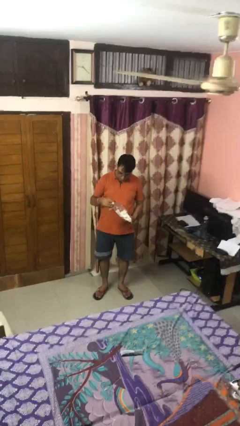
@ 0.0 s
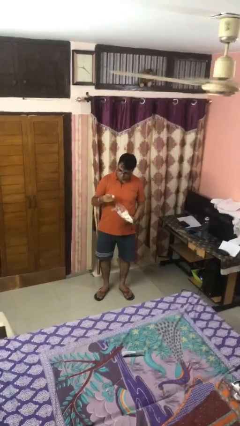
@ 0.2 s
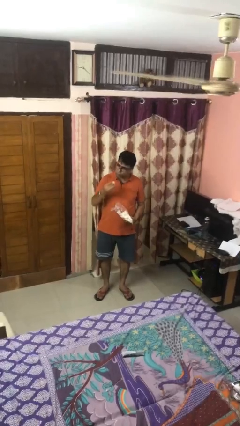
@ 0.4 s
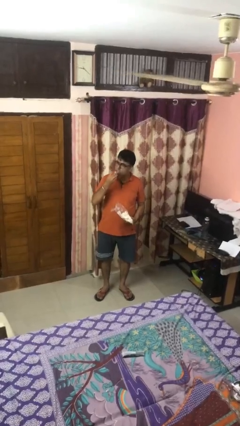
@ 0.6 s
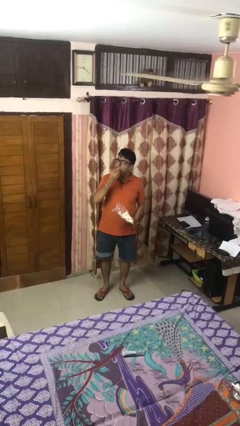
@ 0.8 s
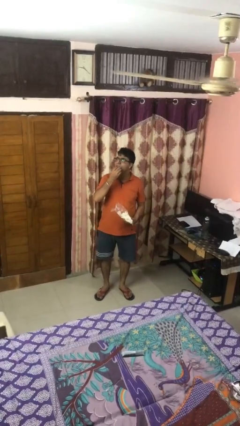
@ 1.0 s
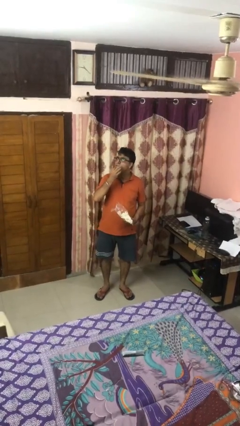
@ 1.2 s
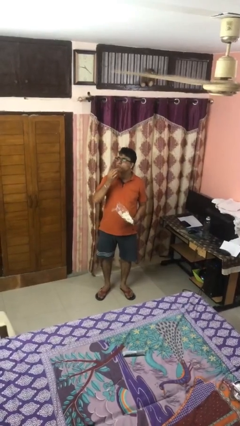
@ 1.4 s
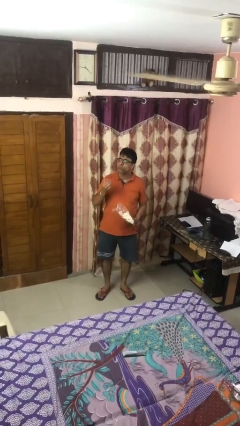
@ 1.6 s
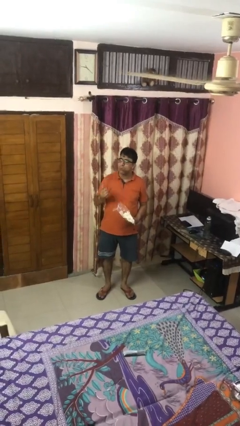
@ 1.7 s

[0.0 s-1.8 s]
person eats snack from bag

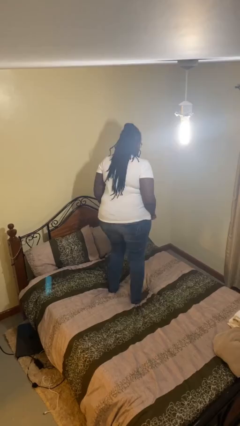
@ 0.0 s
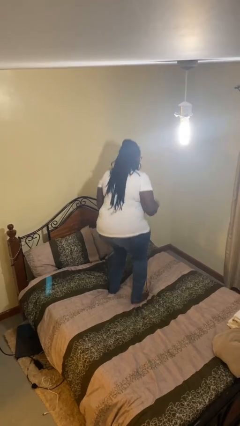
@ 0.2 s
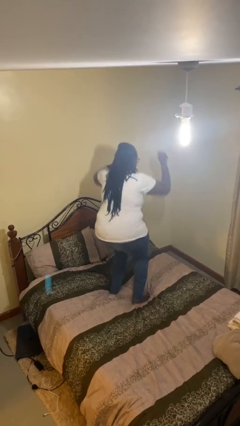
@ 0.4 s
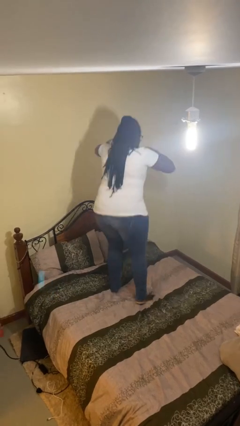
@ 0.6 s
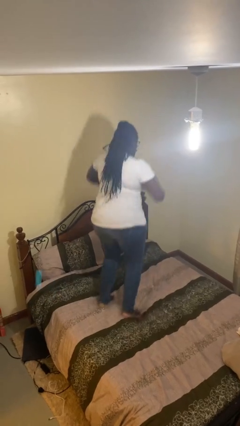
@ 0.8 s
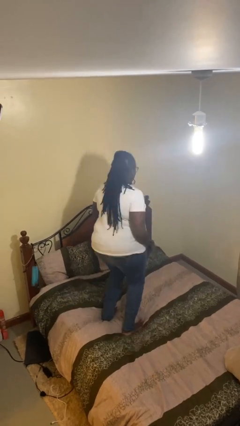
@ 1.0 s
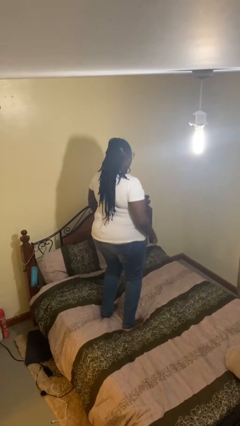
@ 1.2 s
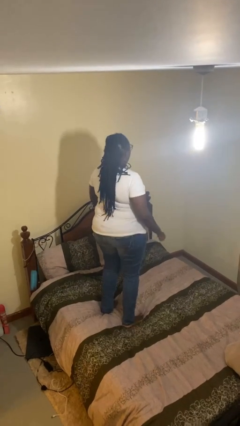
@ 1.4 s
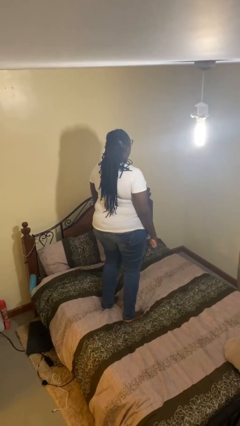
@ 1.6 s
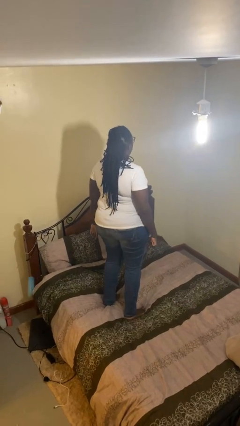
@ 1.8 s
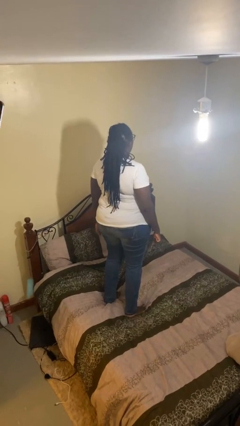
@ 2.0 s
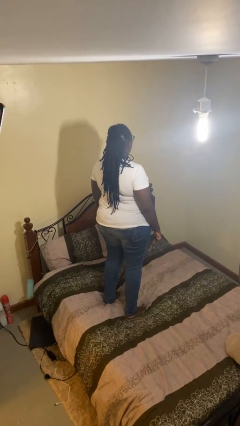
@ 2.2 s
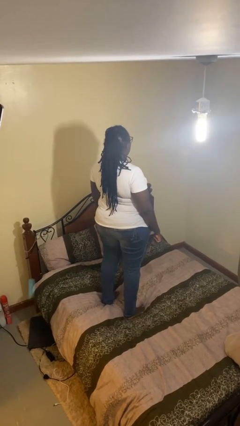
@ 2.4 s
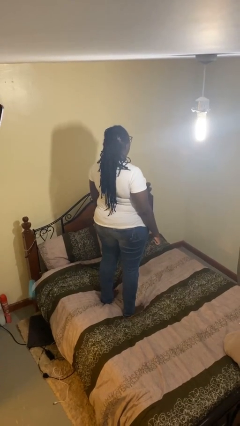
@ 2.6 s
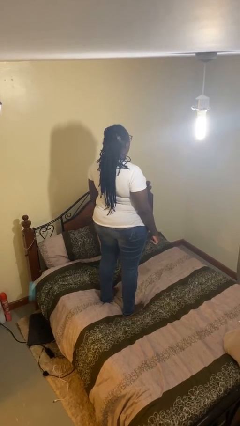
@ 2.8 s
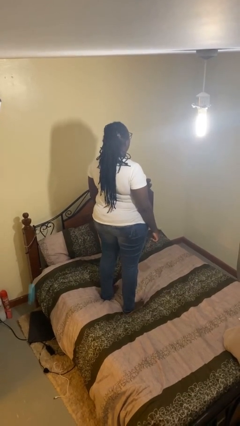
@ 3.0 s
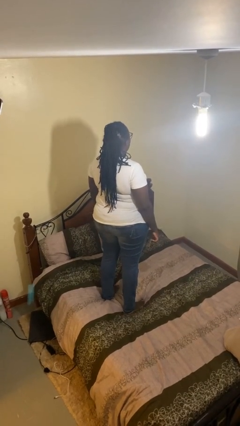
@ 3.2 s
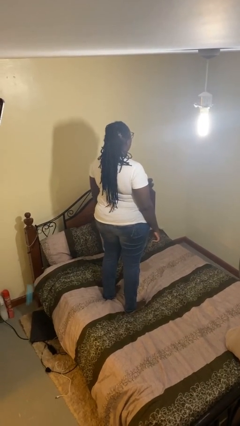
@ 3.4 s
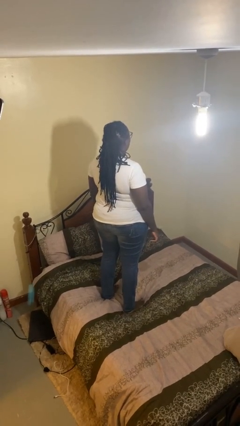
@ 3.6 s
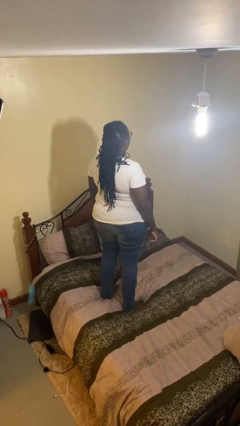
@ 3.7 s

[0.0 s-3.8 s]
person jumps on bed

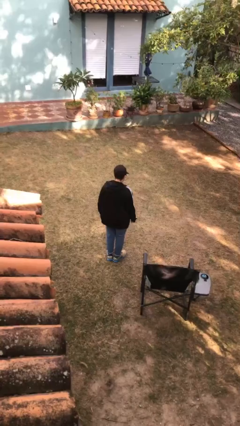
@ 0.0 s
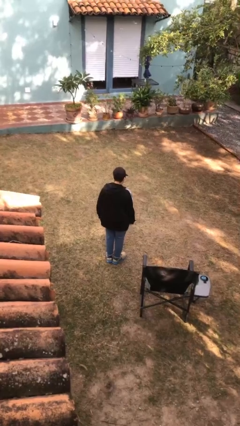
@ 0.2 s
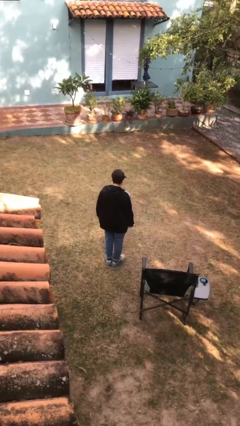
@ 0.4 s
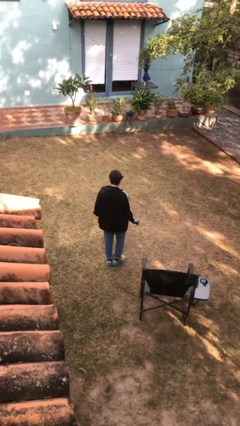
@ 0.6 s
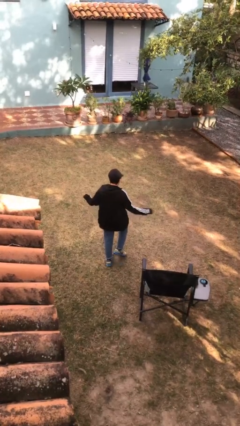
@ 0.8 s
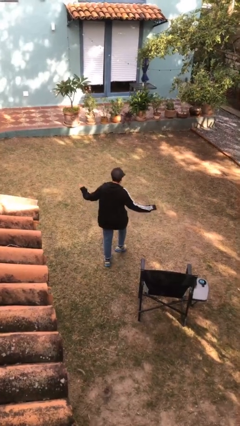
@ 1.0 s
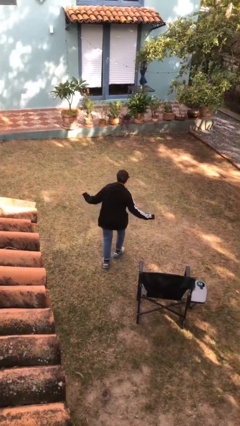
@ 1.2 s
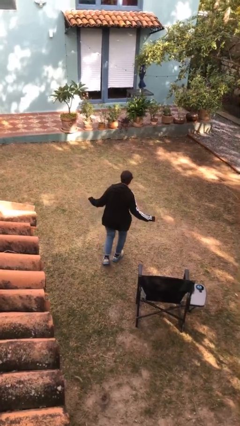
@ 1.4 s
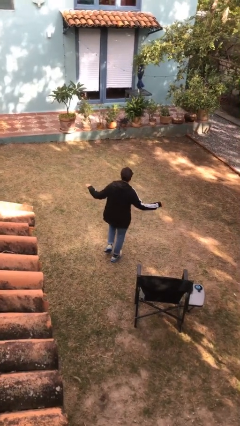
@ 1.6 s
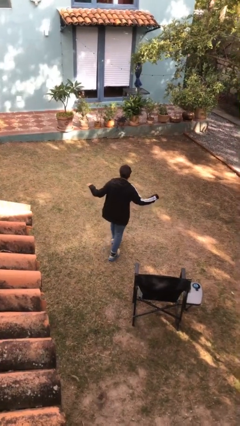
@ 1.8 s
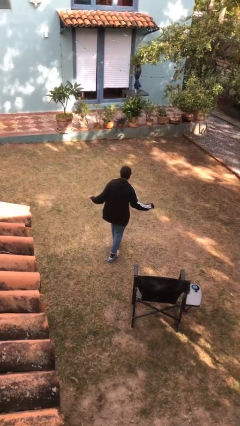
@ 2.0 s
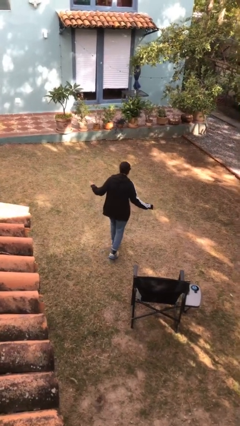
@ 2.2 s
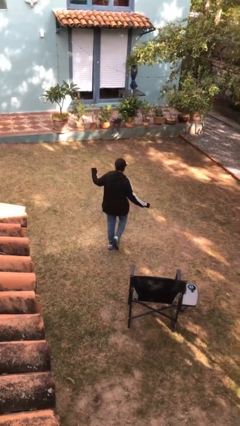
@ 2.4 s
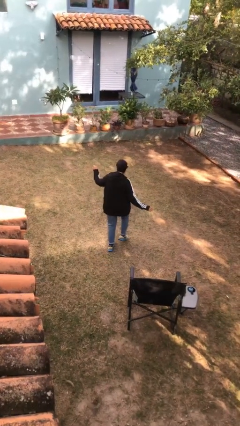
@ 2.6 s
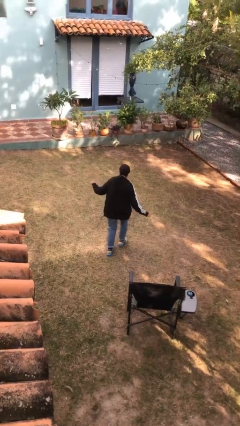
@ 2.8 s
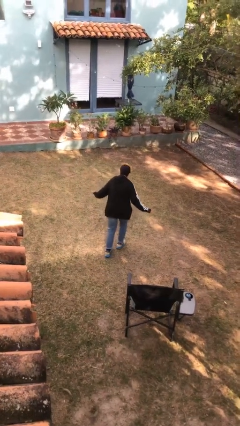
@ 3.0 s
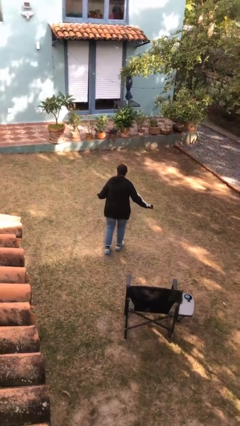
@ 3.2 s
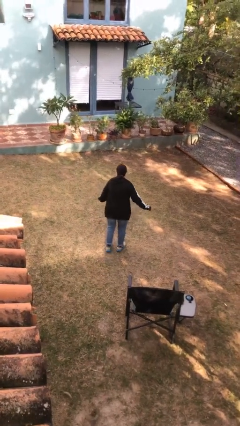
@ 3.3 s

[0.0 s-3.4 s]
person walks tiptoe

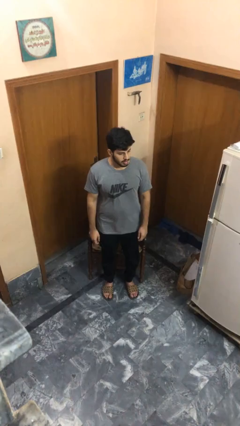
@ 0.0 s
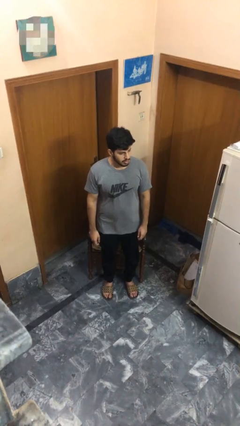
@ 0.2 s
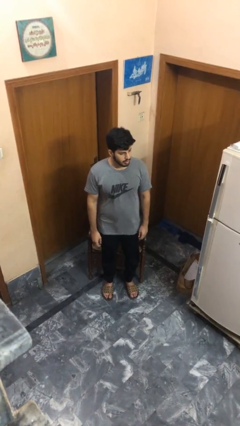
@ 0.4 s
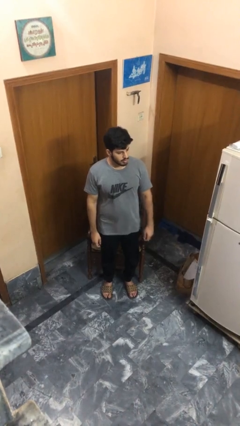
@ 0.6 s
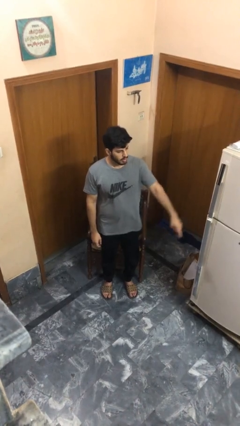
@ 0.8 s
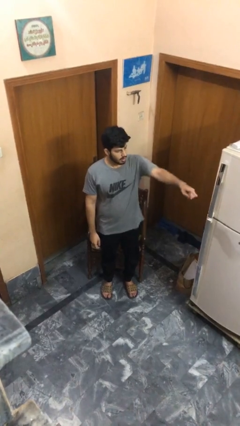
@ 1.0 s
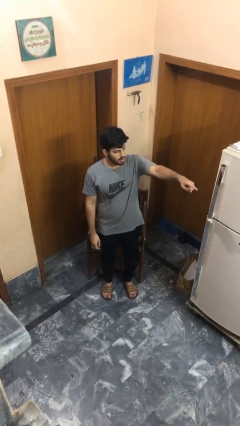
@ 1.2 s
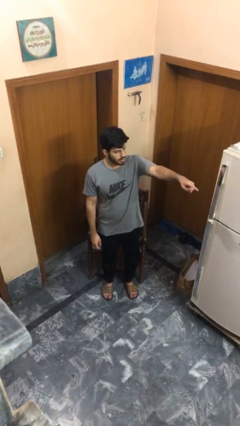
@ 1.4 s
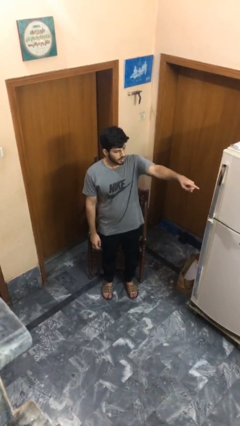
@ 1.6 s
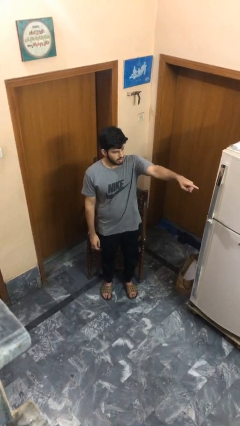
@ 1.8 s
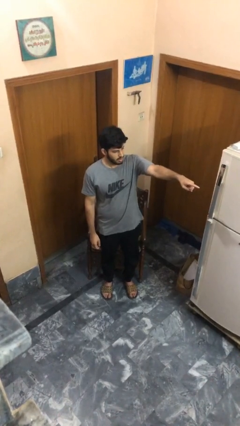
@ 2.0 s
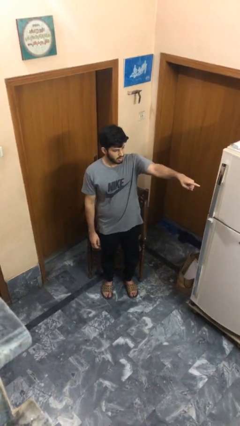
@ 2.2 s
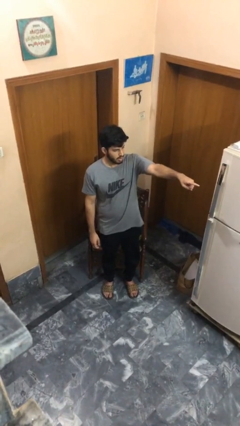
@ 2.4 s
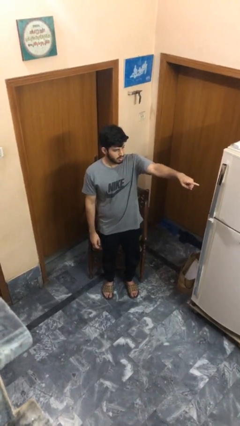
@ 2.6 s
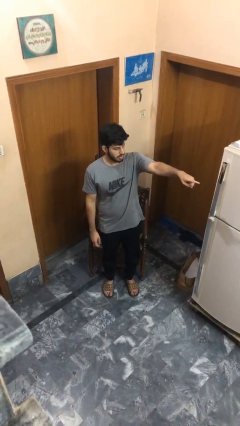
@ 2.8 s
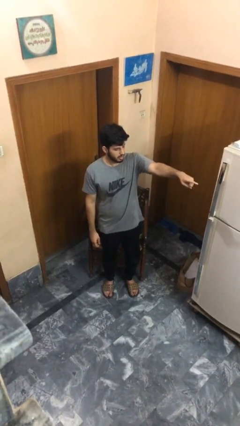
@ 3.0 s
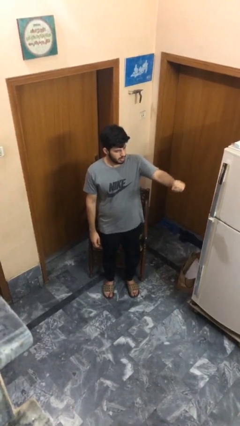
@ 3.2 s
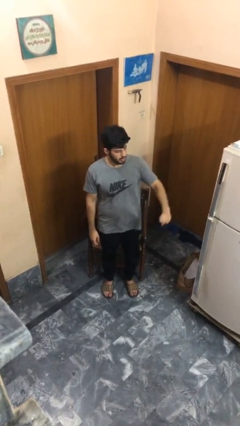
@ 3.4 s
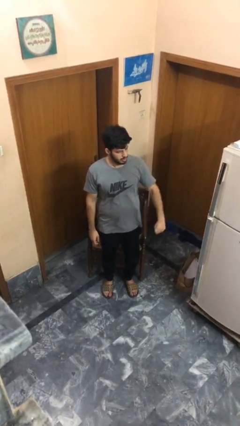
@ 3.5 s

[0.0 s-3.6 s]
person points at person

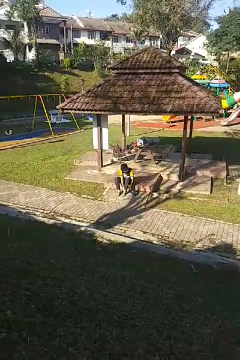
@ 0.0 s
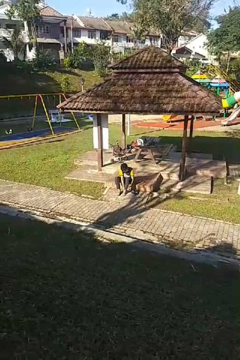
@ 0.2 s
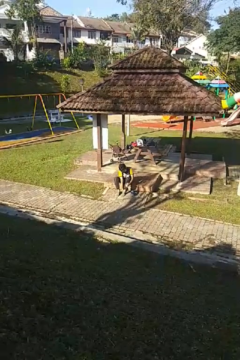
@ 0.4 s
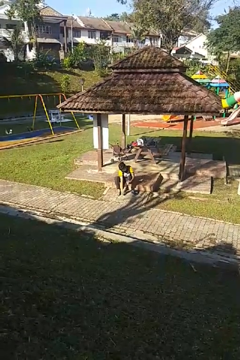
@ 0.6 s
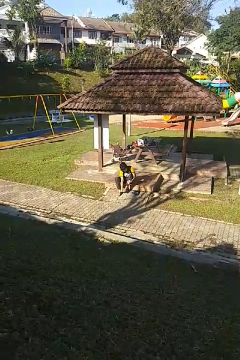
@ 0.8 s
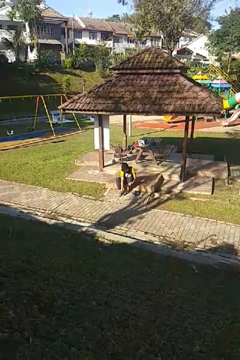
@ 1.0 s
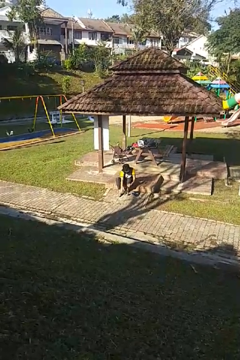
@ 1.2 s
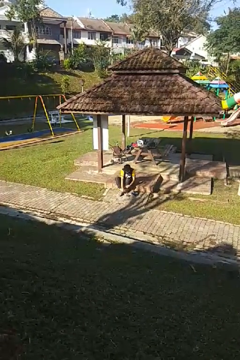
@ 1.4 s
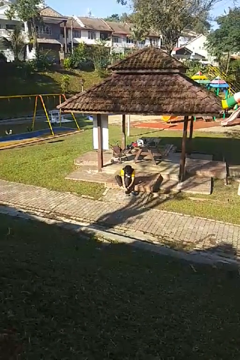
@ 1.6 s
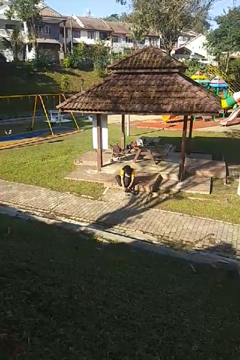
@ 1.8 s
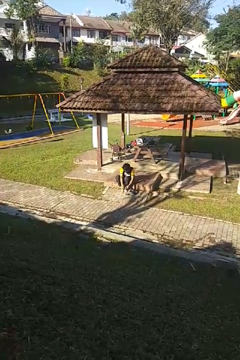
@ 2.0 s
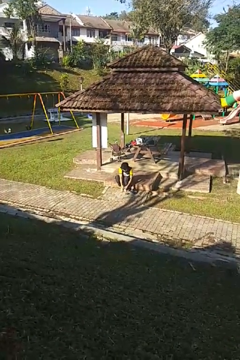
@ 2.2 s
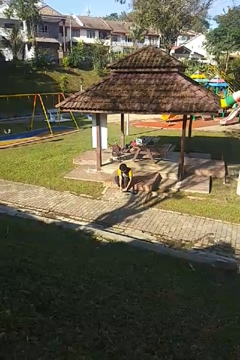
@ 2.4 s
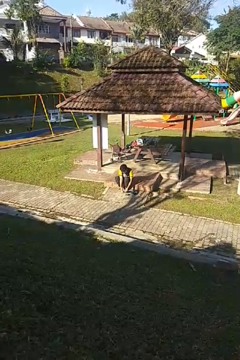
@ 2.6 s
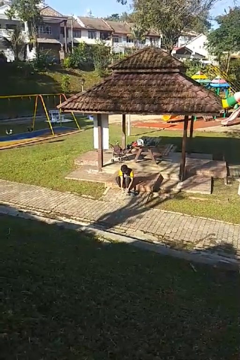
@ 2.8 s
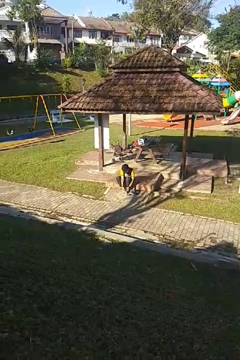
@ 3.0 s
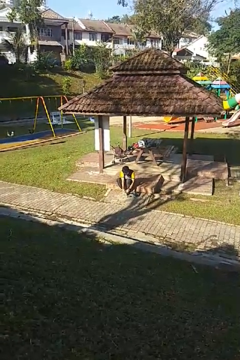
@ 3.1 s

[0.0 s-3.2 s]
person takes off socks

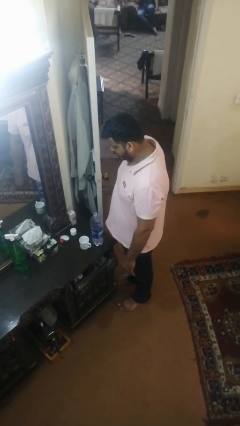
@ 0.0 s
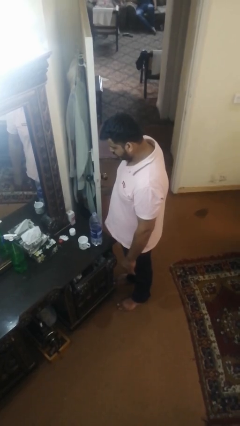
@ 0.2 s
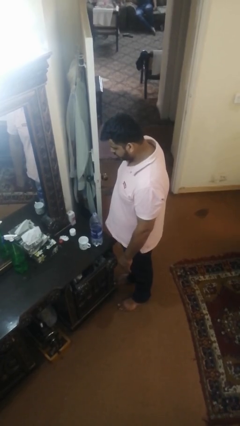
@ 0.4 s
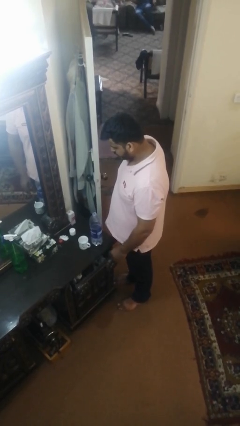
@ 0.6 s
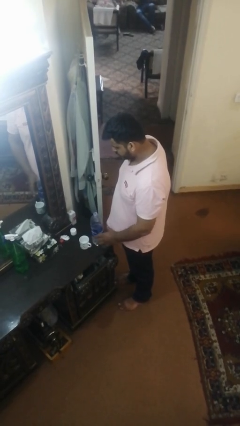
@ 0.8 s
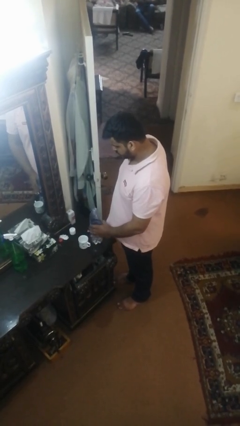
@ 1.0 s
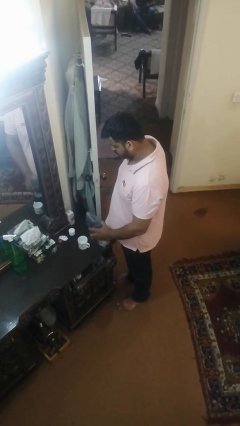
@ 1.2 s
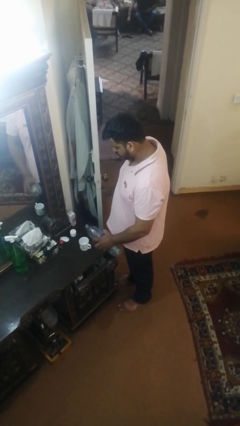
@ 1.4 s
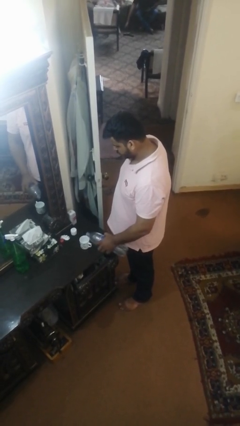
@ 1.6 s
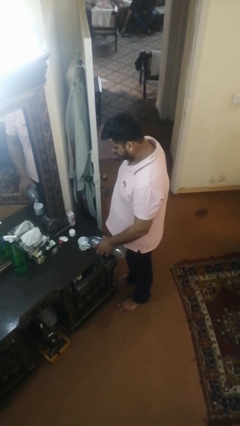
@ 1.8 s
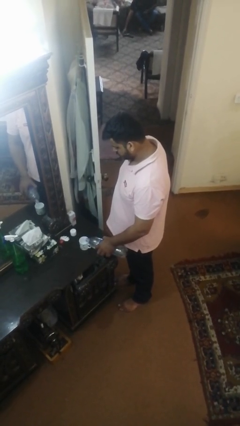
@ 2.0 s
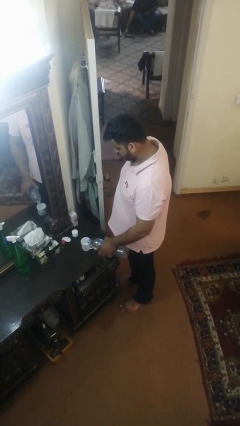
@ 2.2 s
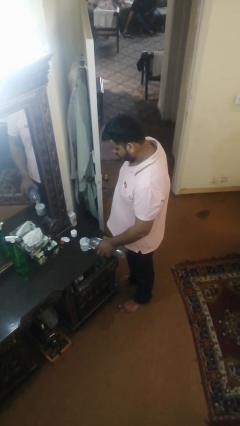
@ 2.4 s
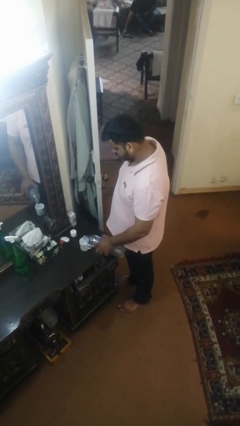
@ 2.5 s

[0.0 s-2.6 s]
person pours liquid into cup
